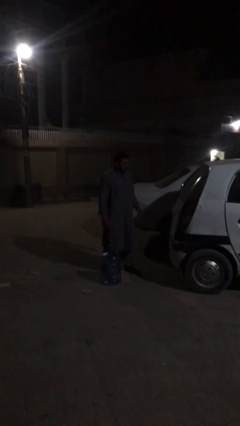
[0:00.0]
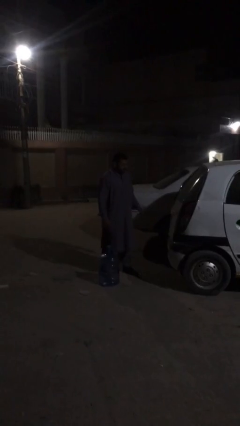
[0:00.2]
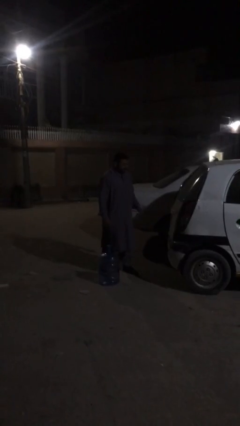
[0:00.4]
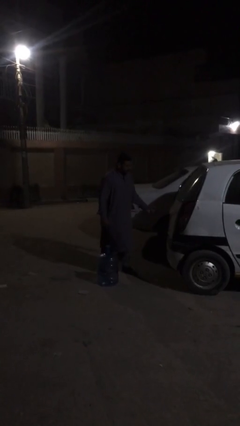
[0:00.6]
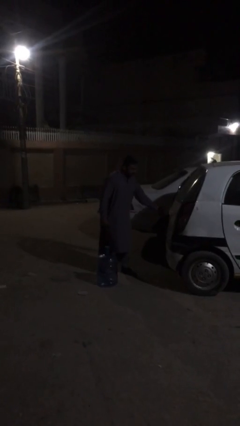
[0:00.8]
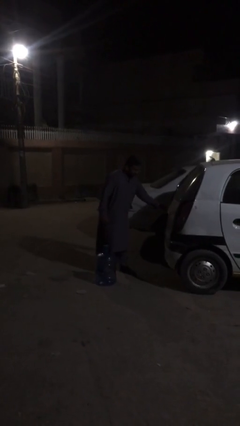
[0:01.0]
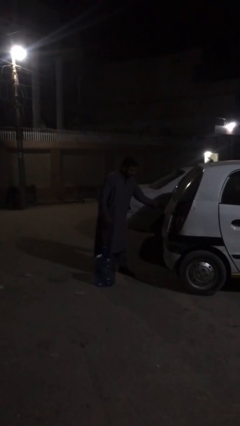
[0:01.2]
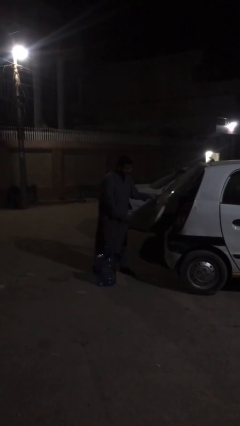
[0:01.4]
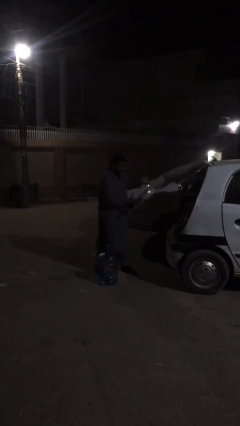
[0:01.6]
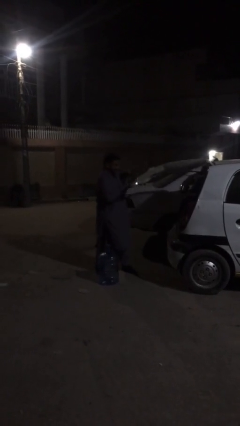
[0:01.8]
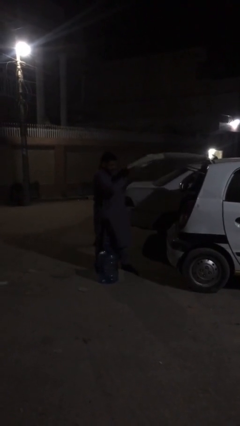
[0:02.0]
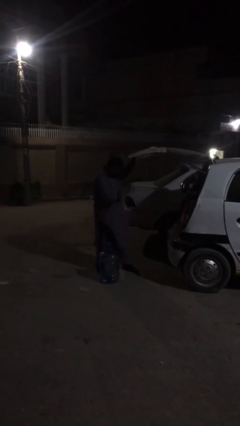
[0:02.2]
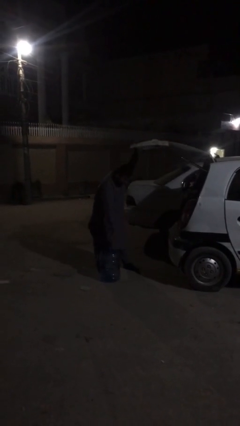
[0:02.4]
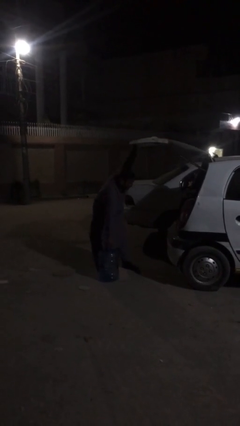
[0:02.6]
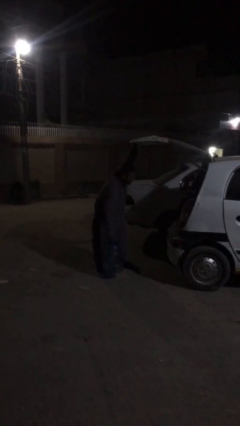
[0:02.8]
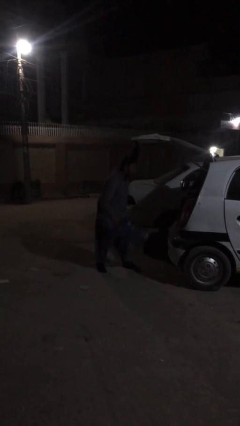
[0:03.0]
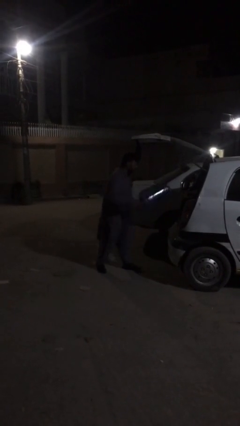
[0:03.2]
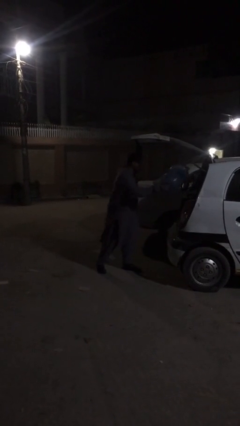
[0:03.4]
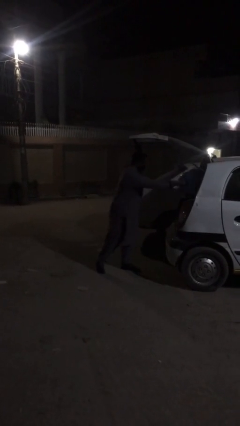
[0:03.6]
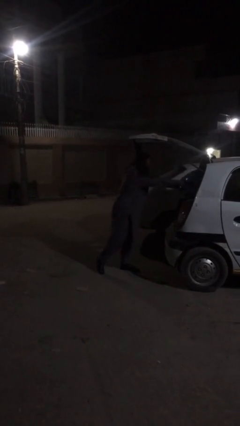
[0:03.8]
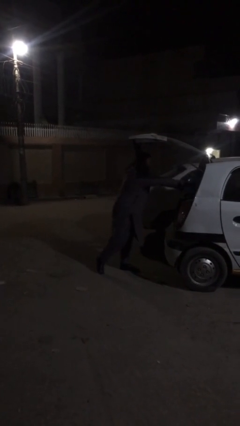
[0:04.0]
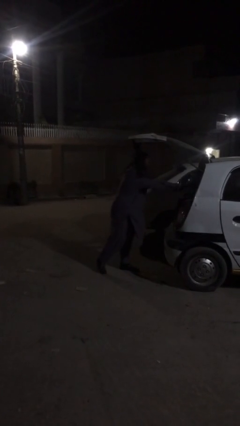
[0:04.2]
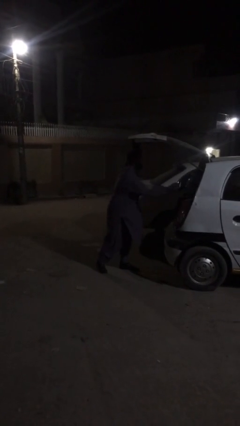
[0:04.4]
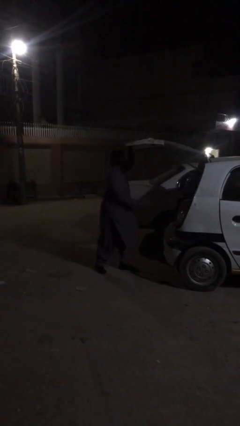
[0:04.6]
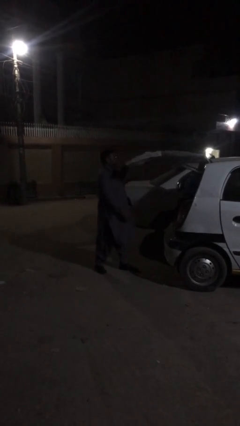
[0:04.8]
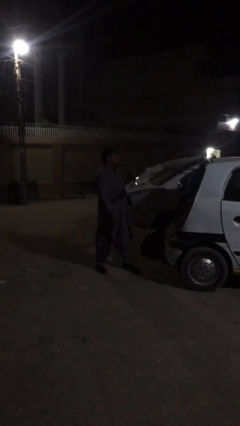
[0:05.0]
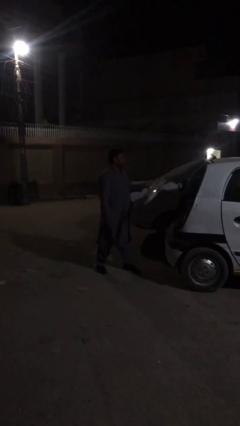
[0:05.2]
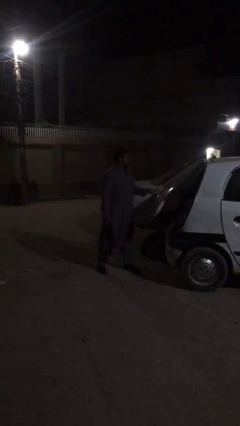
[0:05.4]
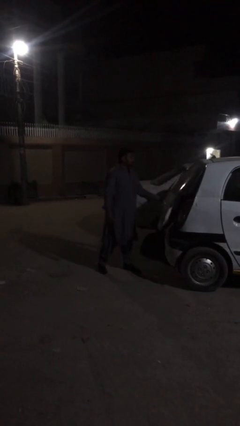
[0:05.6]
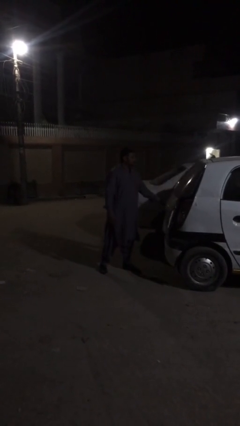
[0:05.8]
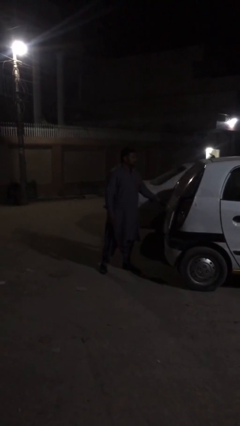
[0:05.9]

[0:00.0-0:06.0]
person loads car

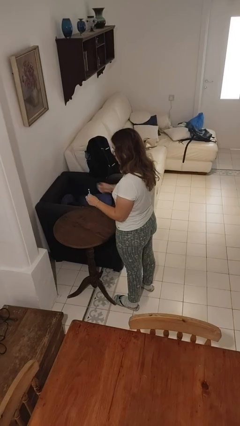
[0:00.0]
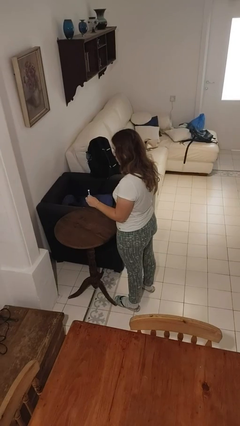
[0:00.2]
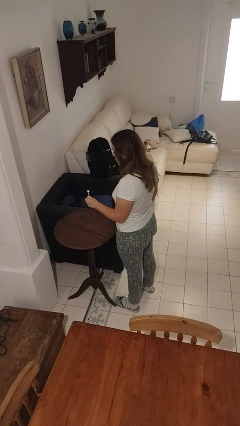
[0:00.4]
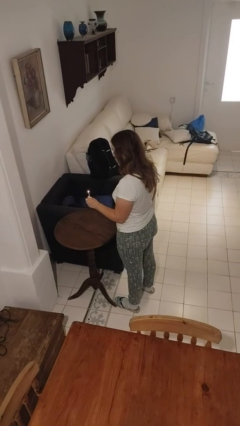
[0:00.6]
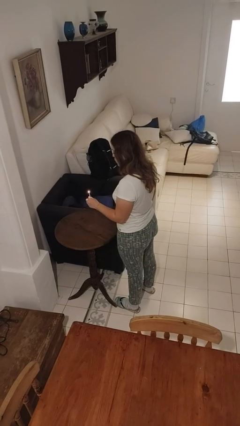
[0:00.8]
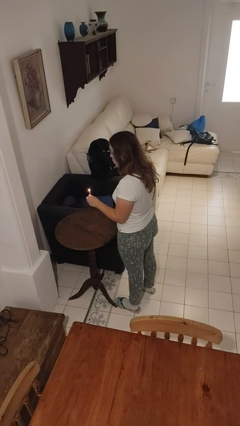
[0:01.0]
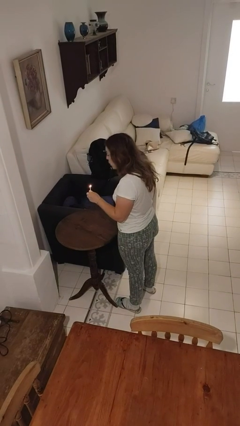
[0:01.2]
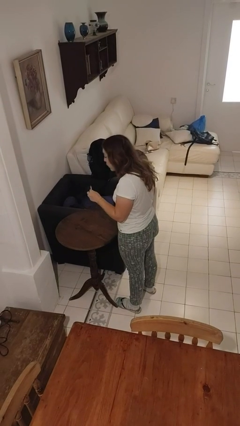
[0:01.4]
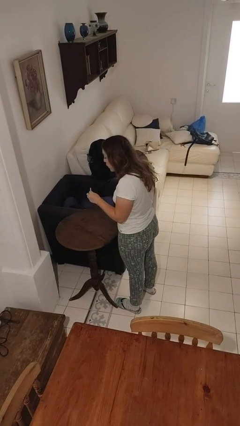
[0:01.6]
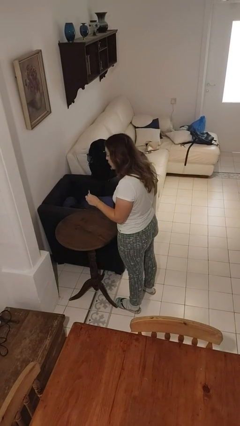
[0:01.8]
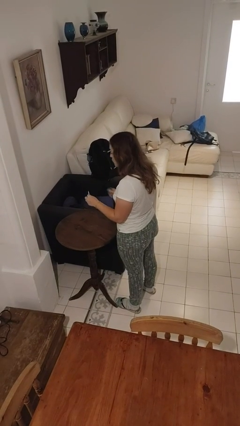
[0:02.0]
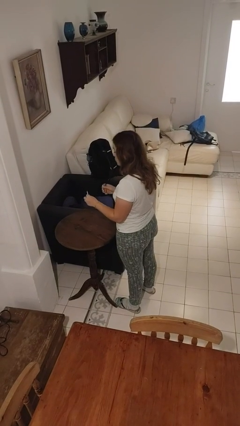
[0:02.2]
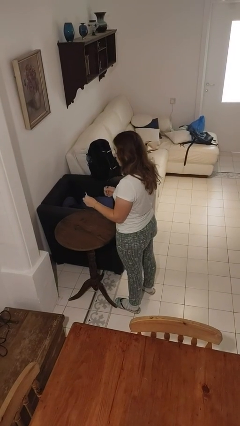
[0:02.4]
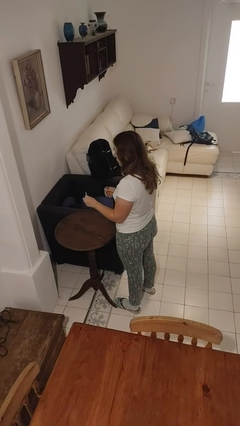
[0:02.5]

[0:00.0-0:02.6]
person extinguishes candle

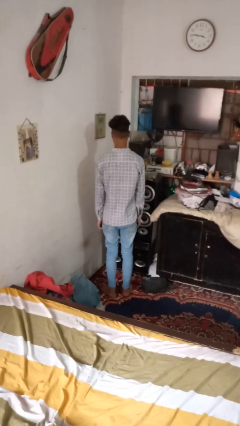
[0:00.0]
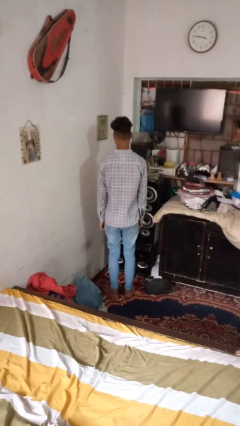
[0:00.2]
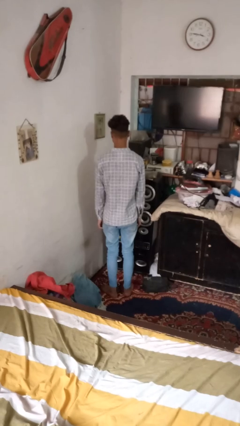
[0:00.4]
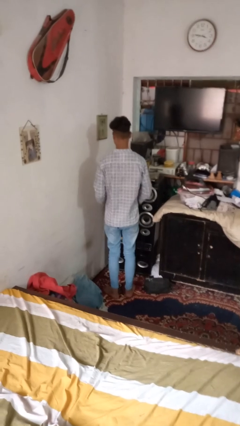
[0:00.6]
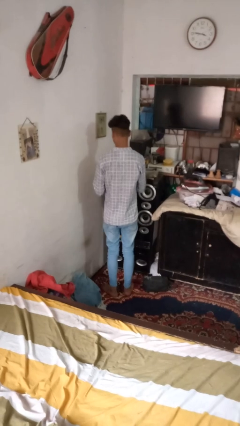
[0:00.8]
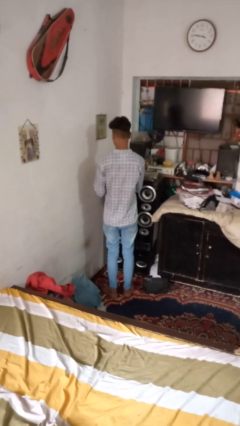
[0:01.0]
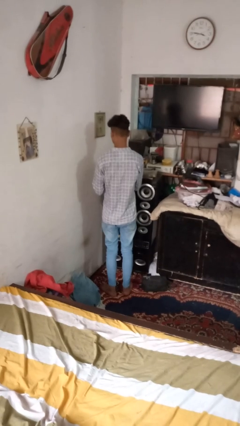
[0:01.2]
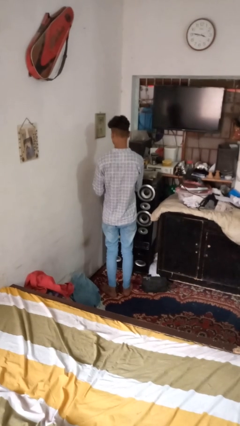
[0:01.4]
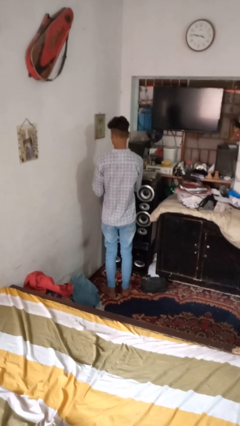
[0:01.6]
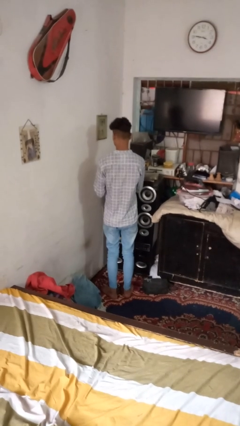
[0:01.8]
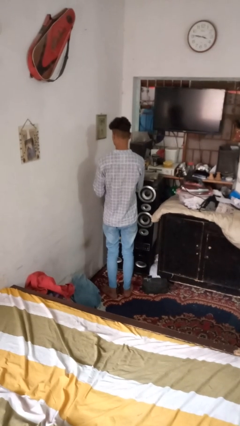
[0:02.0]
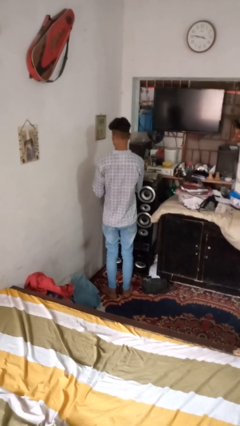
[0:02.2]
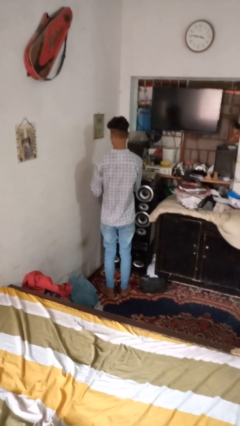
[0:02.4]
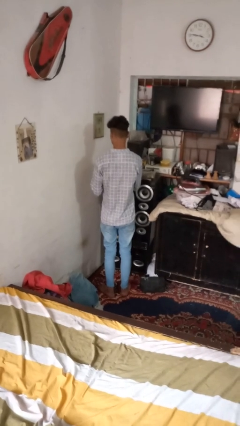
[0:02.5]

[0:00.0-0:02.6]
person files fingernails

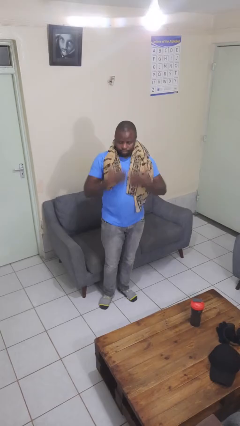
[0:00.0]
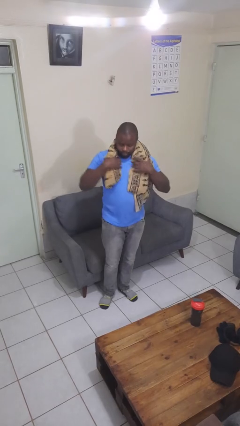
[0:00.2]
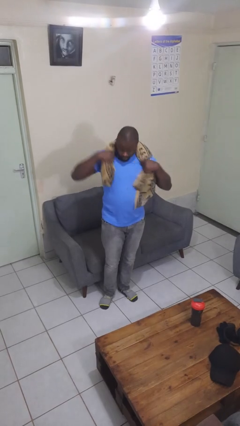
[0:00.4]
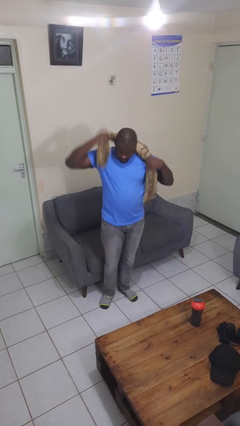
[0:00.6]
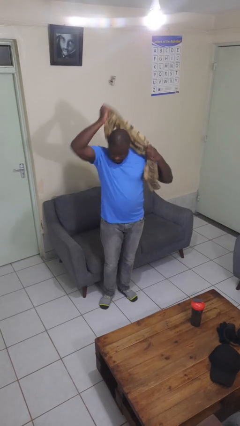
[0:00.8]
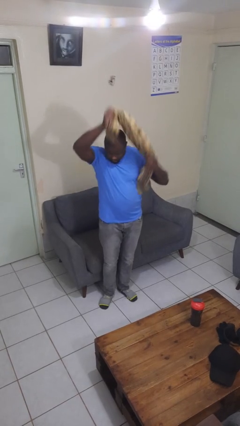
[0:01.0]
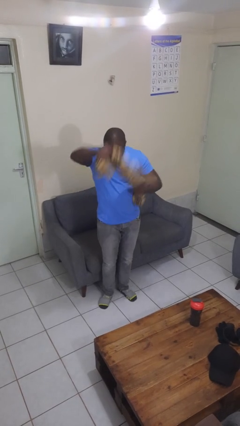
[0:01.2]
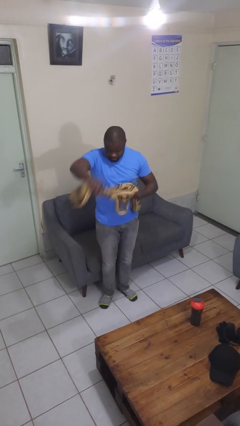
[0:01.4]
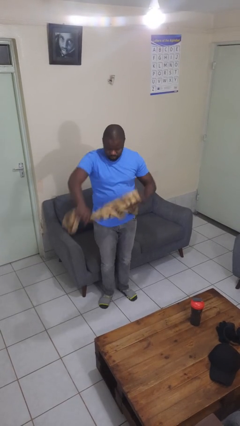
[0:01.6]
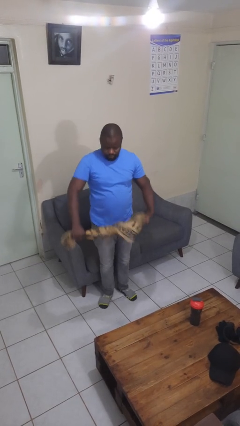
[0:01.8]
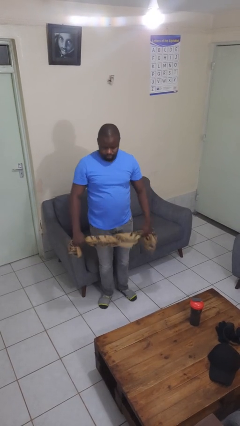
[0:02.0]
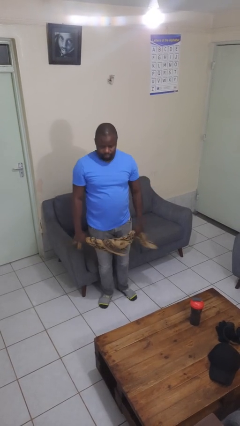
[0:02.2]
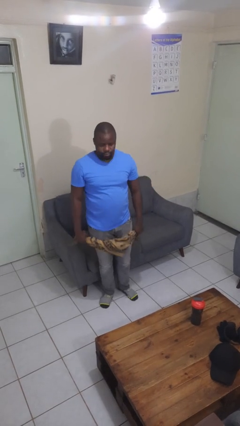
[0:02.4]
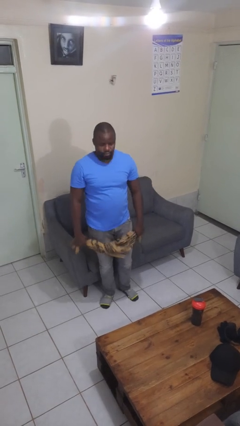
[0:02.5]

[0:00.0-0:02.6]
person takes off scarf

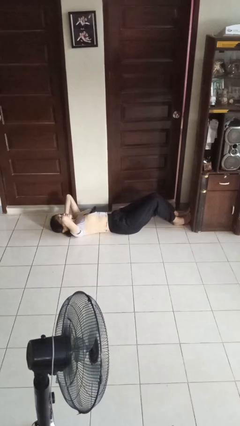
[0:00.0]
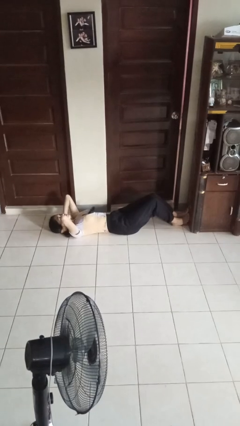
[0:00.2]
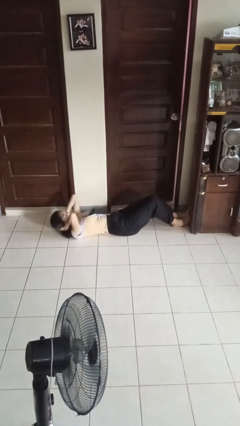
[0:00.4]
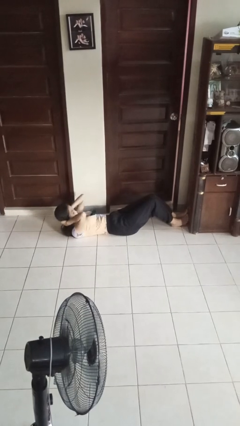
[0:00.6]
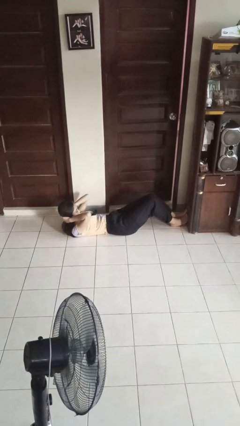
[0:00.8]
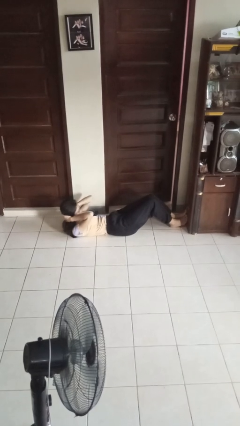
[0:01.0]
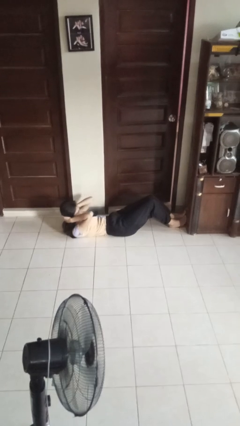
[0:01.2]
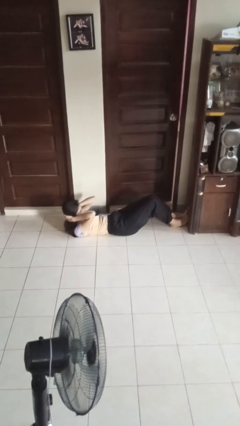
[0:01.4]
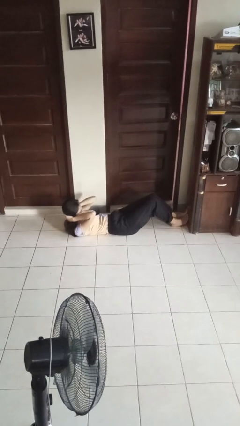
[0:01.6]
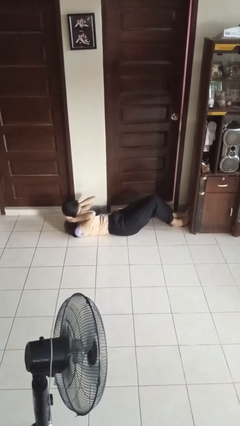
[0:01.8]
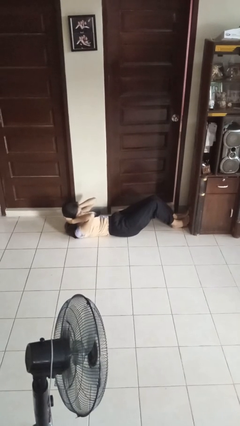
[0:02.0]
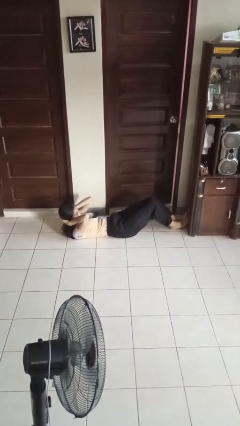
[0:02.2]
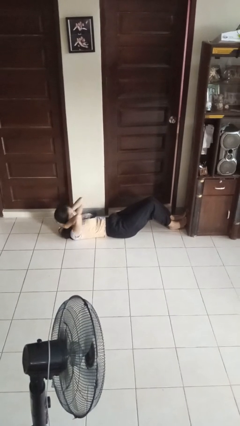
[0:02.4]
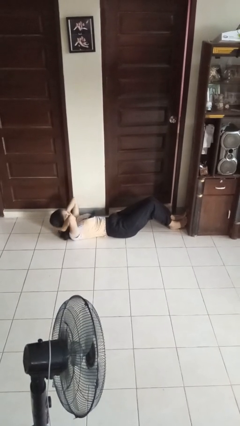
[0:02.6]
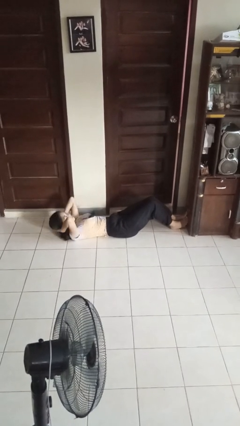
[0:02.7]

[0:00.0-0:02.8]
person exercises with situp

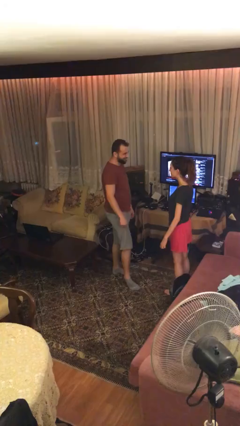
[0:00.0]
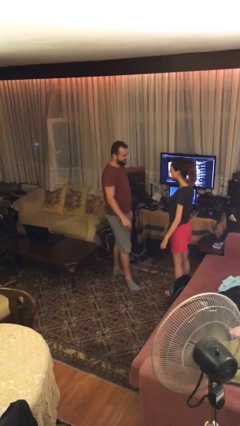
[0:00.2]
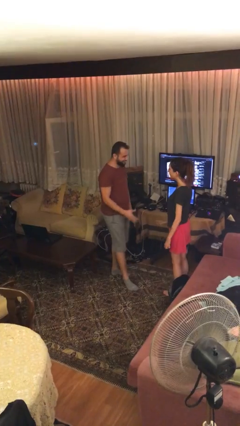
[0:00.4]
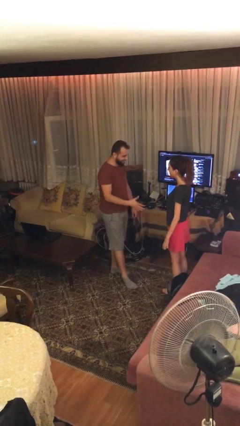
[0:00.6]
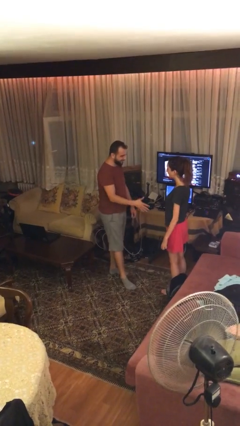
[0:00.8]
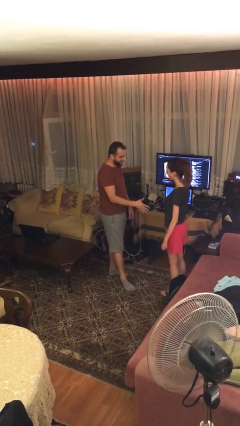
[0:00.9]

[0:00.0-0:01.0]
person shakes hand

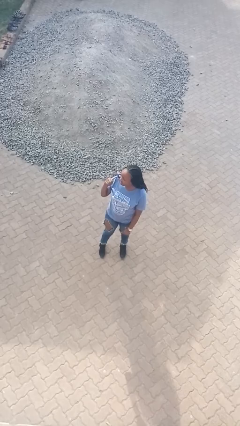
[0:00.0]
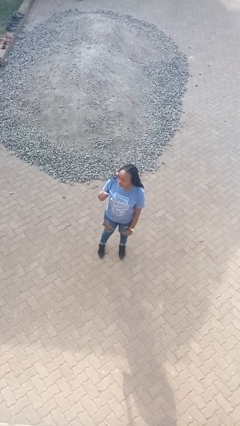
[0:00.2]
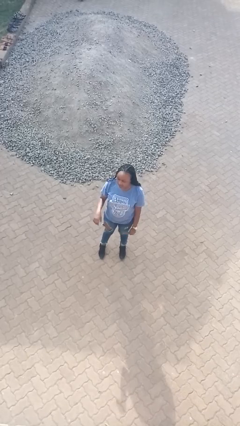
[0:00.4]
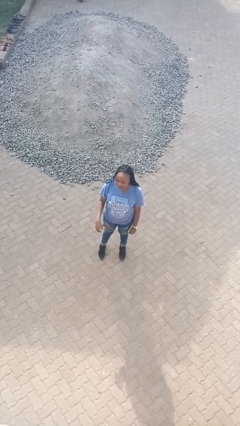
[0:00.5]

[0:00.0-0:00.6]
person gestures behind me
